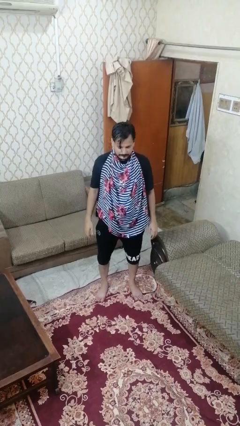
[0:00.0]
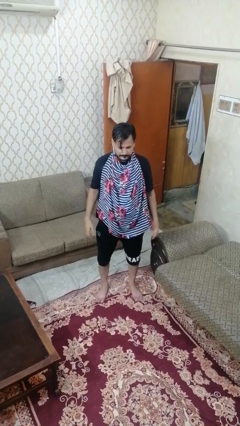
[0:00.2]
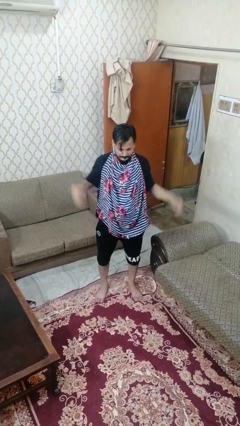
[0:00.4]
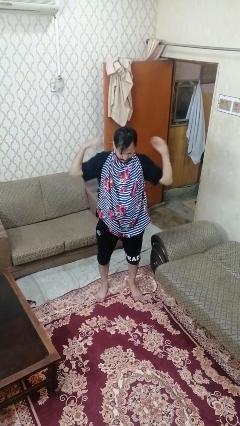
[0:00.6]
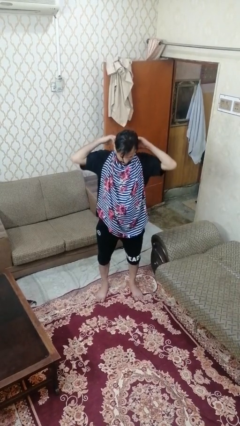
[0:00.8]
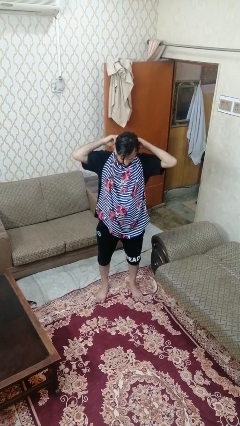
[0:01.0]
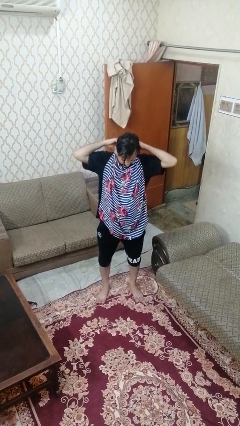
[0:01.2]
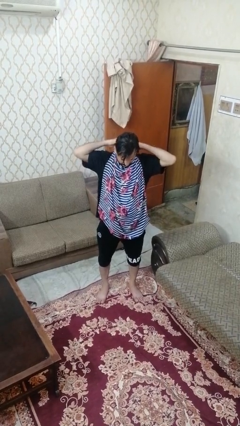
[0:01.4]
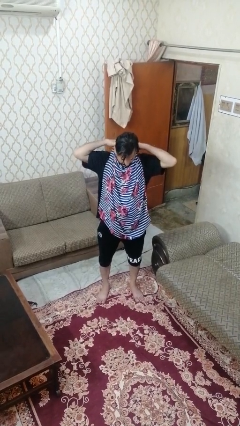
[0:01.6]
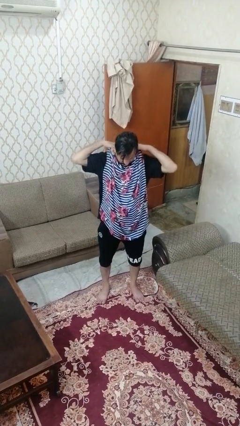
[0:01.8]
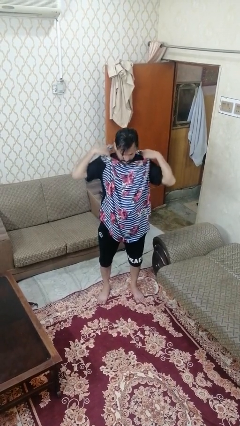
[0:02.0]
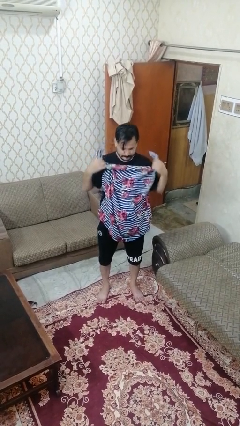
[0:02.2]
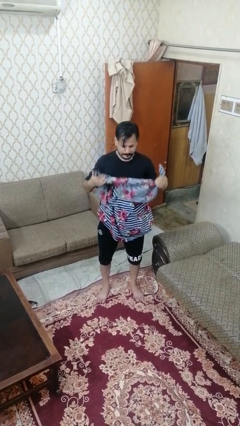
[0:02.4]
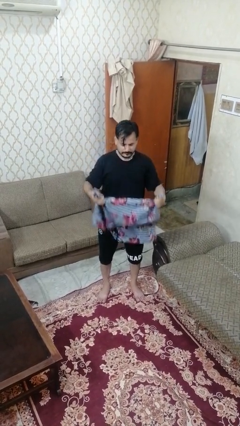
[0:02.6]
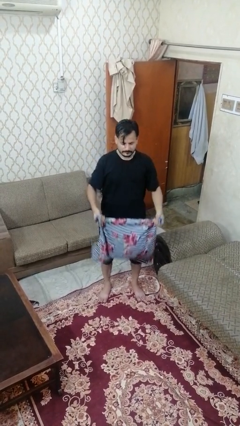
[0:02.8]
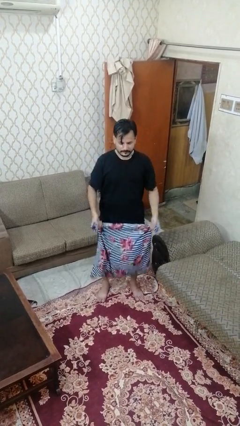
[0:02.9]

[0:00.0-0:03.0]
person takes off apron

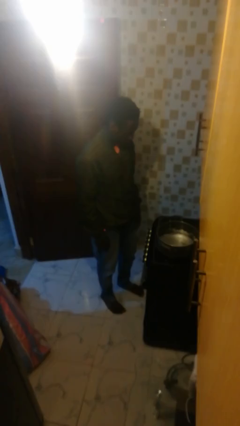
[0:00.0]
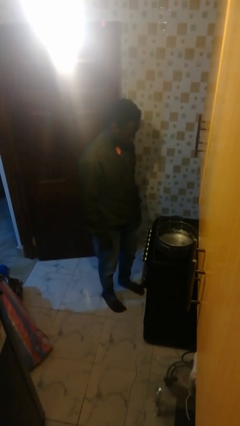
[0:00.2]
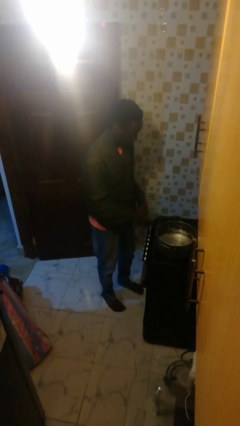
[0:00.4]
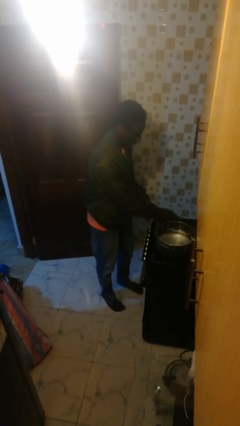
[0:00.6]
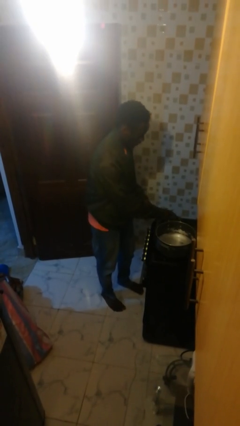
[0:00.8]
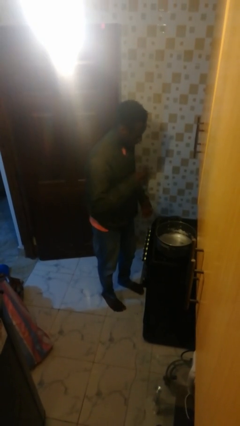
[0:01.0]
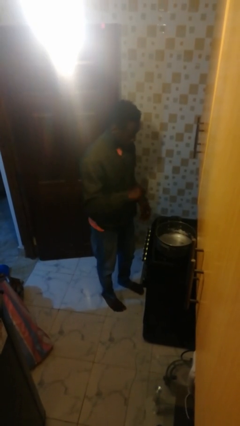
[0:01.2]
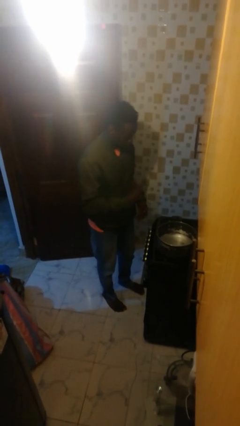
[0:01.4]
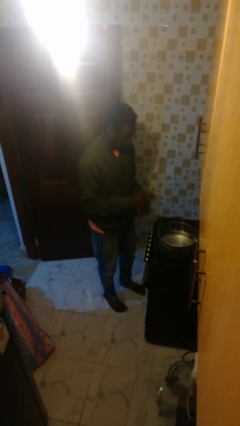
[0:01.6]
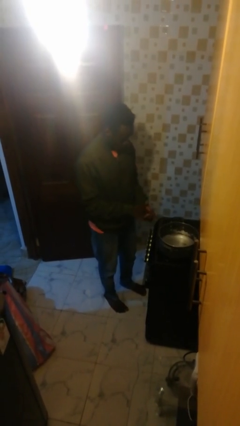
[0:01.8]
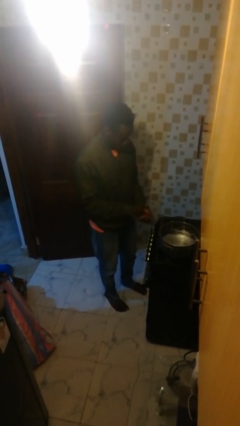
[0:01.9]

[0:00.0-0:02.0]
person burns hand

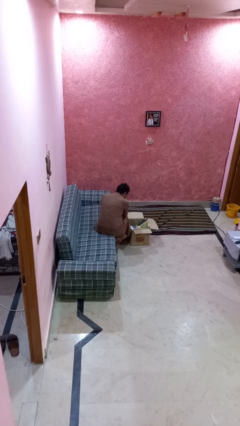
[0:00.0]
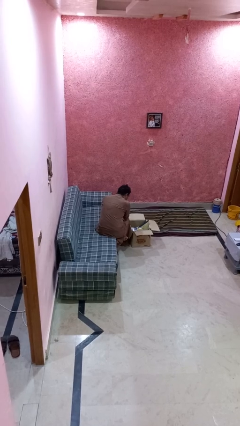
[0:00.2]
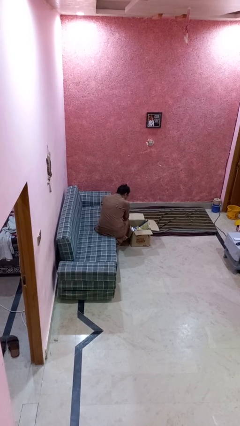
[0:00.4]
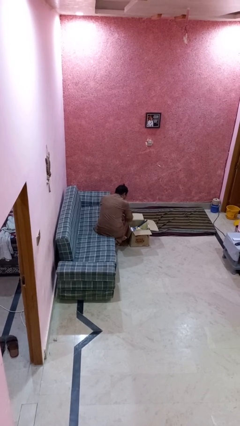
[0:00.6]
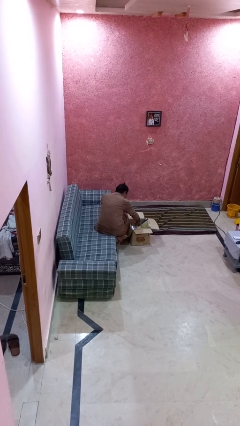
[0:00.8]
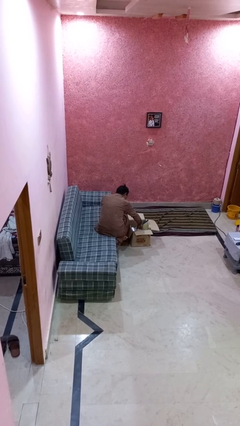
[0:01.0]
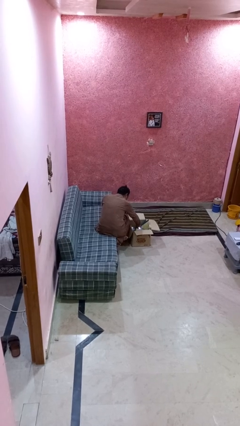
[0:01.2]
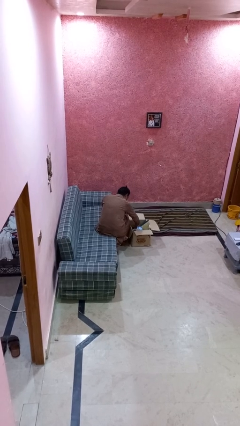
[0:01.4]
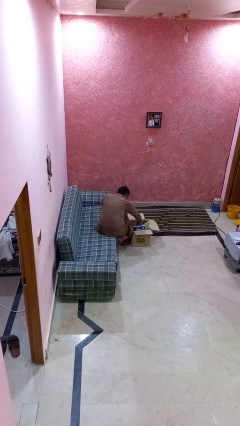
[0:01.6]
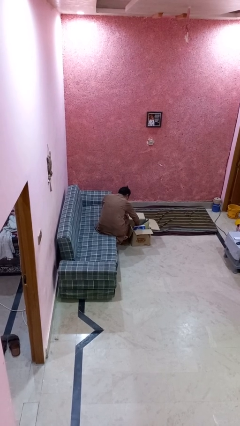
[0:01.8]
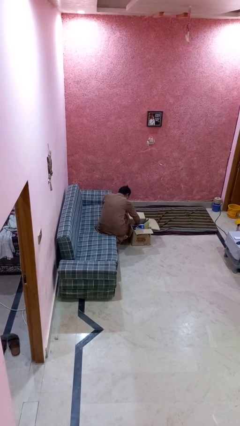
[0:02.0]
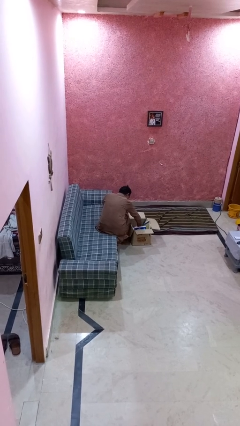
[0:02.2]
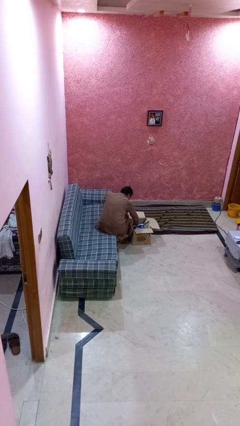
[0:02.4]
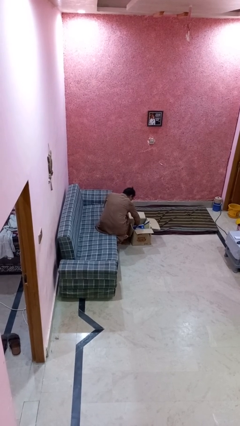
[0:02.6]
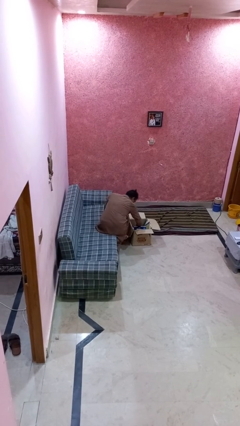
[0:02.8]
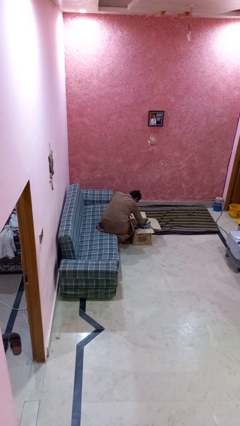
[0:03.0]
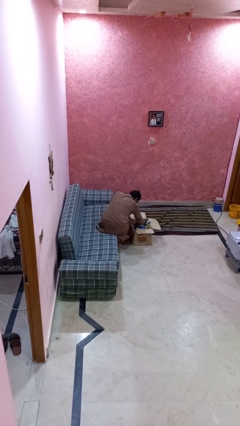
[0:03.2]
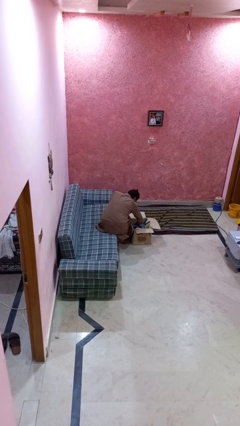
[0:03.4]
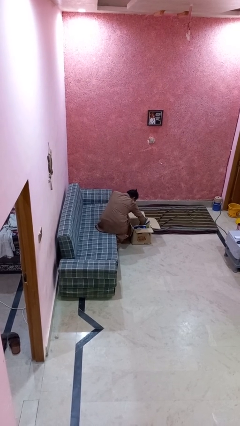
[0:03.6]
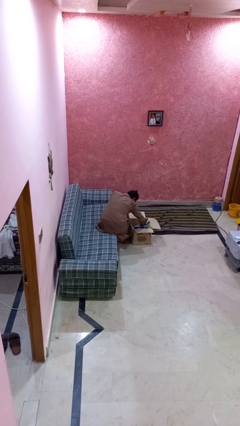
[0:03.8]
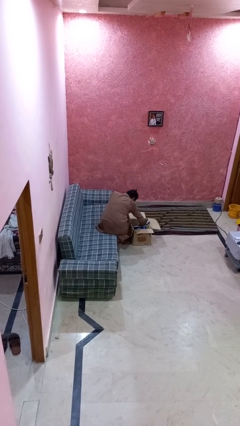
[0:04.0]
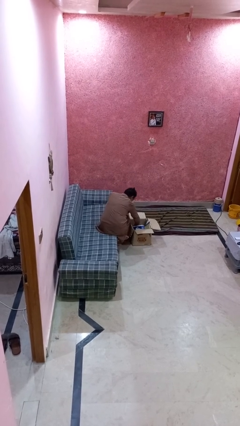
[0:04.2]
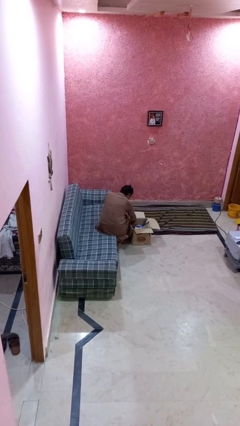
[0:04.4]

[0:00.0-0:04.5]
person searches in box

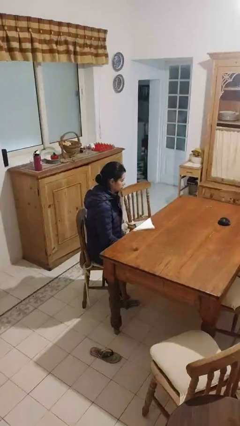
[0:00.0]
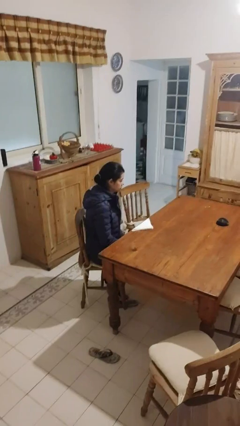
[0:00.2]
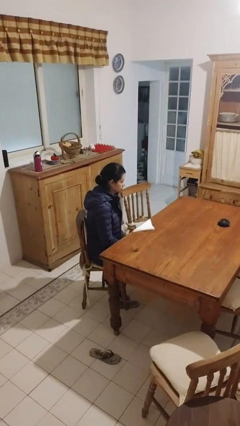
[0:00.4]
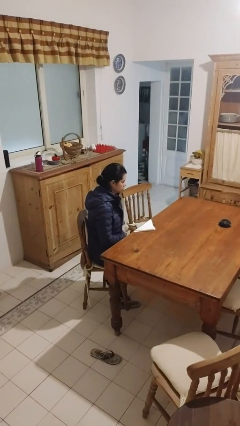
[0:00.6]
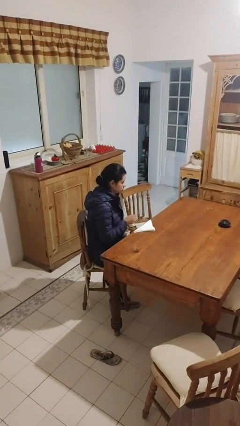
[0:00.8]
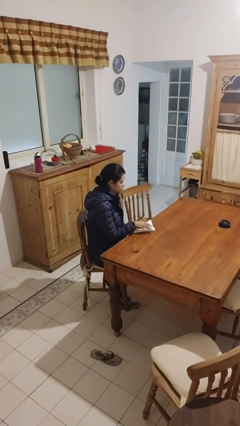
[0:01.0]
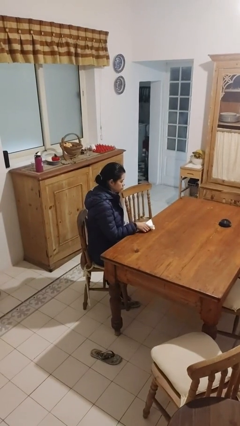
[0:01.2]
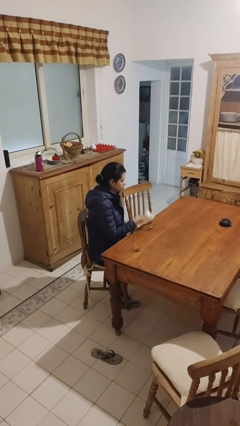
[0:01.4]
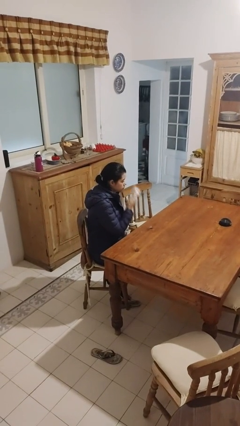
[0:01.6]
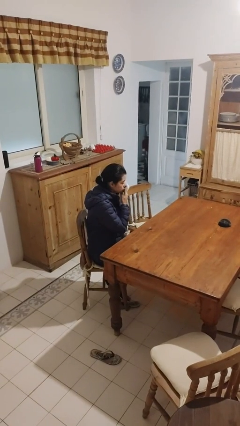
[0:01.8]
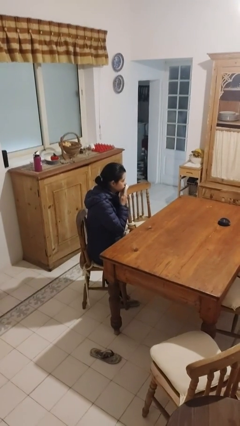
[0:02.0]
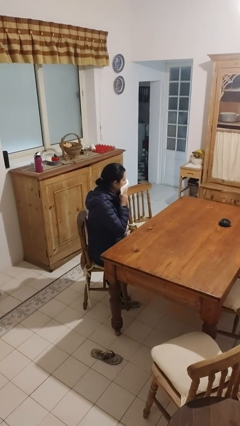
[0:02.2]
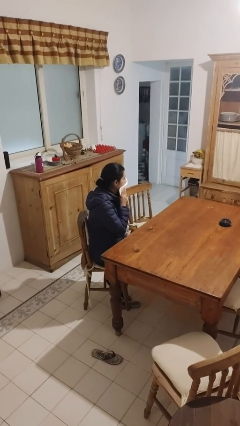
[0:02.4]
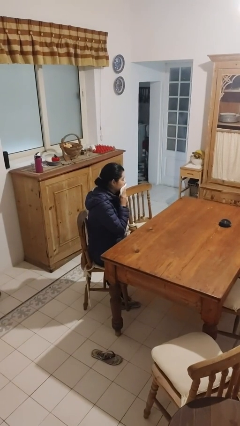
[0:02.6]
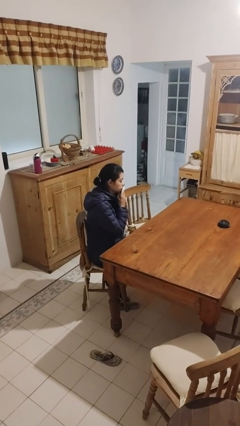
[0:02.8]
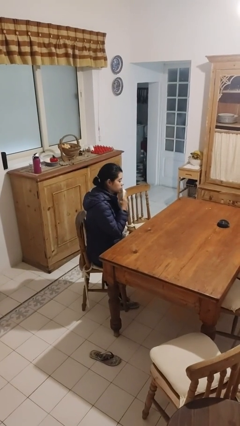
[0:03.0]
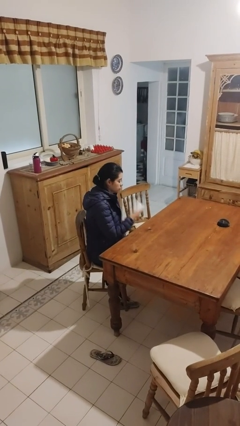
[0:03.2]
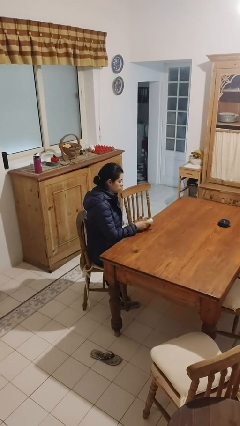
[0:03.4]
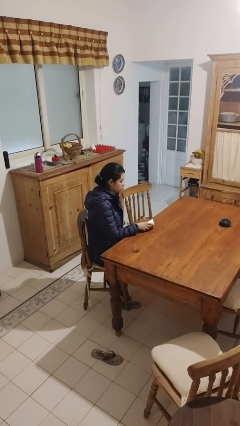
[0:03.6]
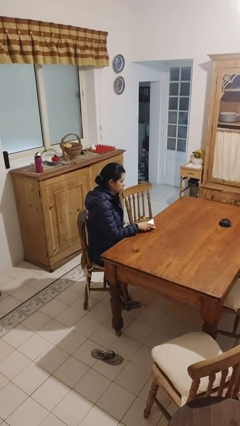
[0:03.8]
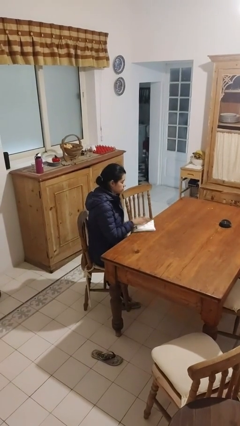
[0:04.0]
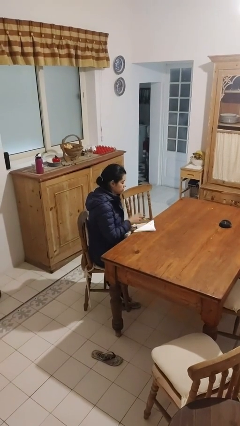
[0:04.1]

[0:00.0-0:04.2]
person wipes mouth with napkin

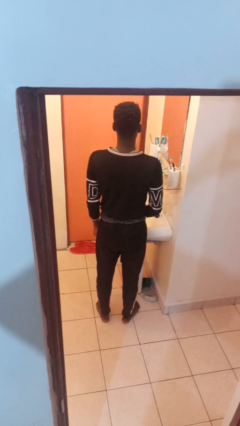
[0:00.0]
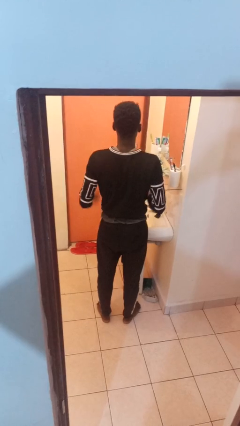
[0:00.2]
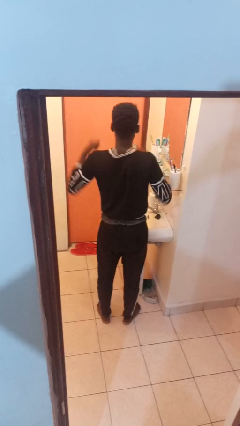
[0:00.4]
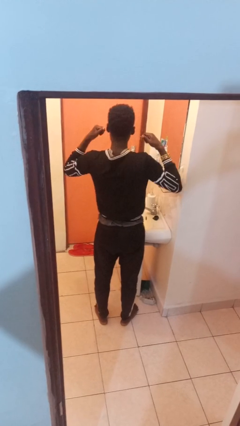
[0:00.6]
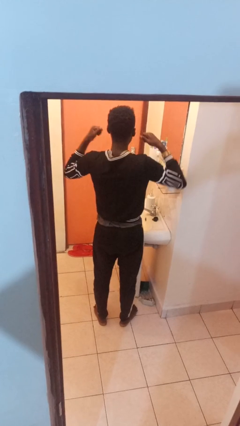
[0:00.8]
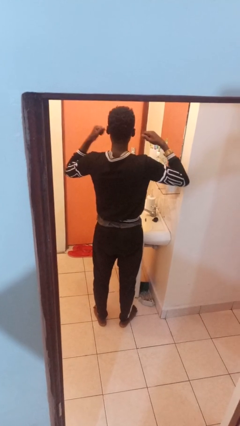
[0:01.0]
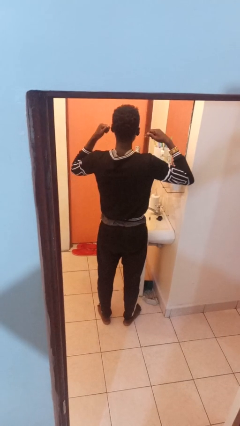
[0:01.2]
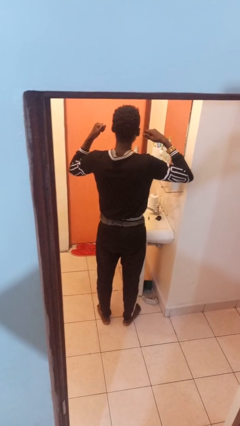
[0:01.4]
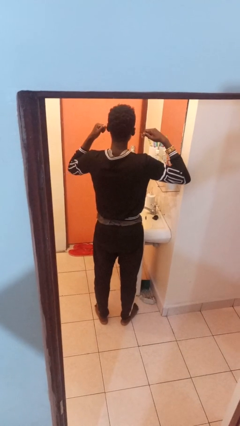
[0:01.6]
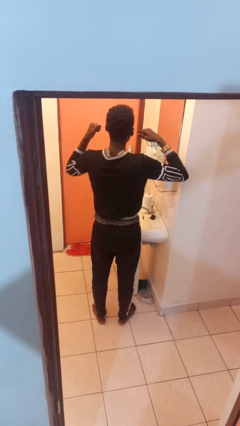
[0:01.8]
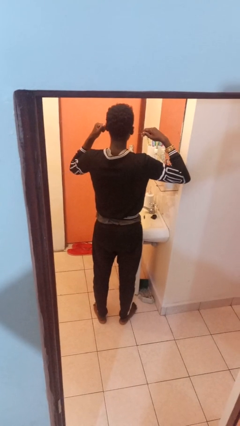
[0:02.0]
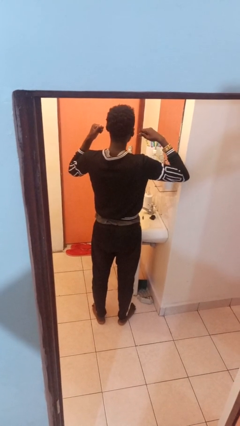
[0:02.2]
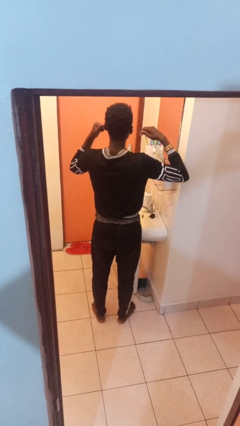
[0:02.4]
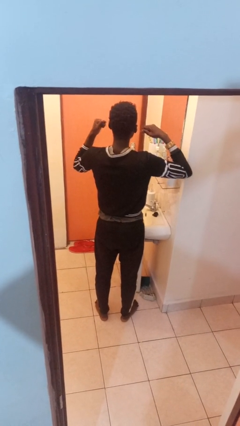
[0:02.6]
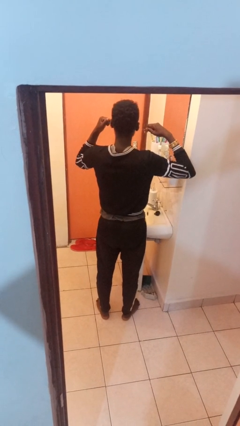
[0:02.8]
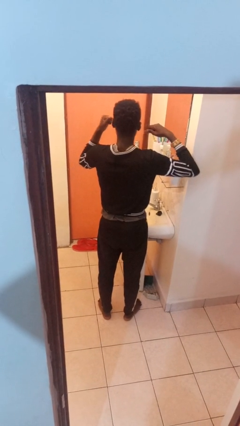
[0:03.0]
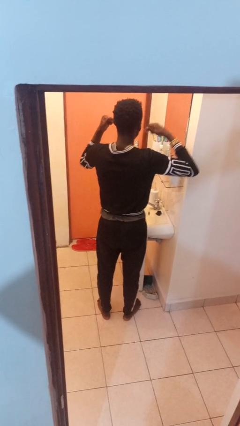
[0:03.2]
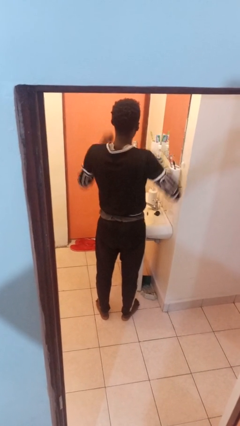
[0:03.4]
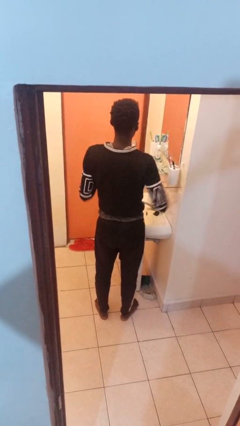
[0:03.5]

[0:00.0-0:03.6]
person flosses
